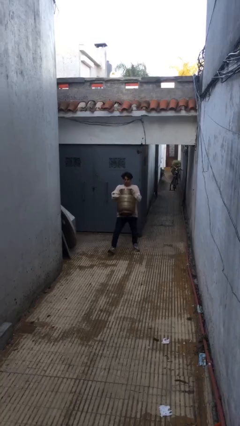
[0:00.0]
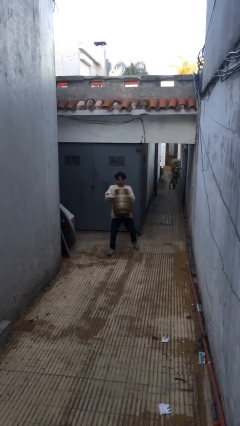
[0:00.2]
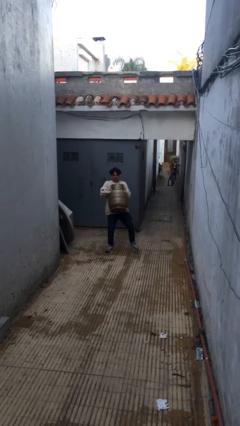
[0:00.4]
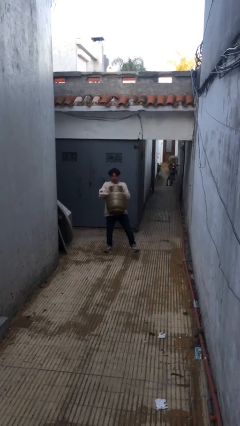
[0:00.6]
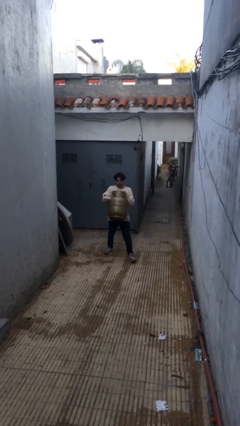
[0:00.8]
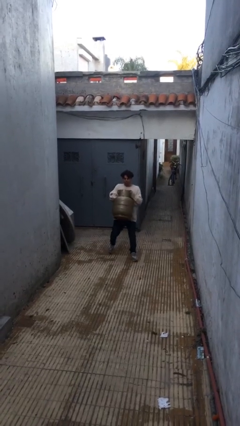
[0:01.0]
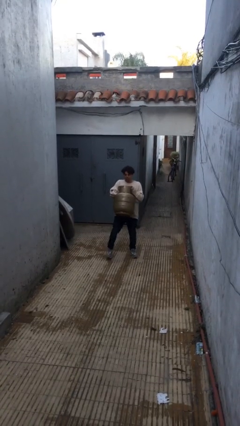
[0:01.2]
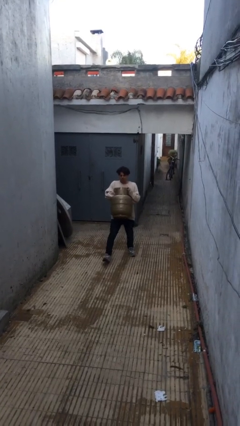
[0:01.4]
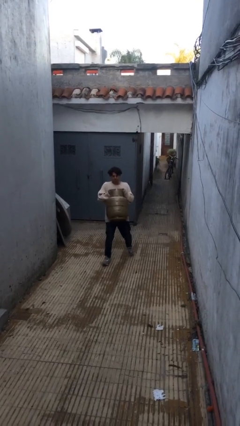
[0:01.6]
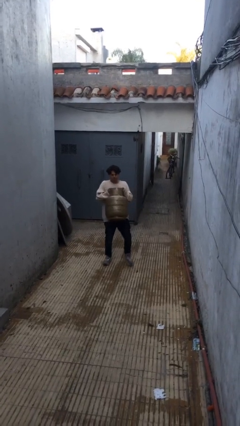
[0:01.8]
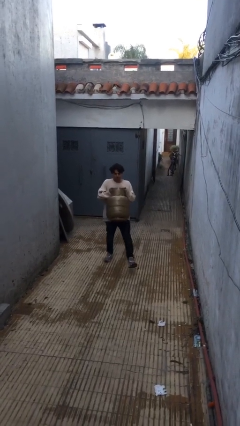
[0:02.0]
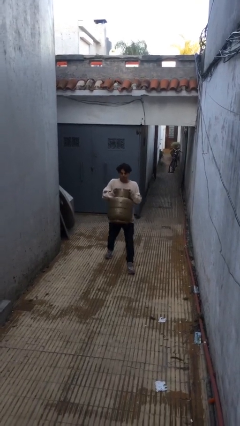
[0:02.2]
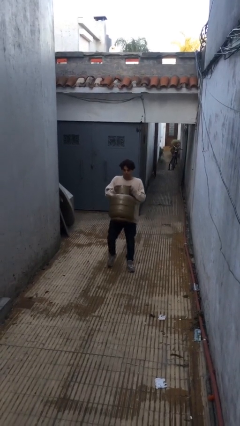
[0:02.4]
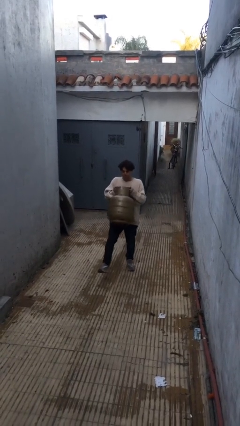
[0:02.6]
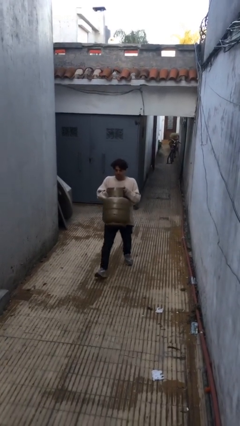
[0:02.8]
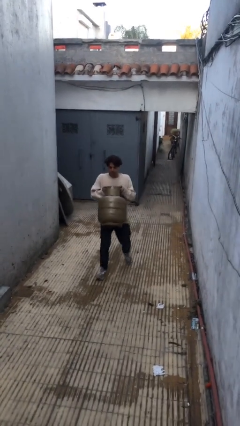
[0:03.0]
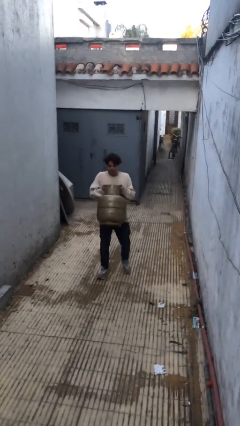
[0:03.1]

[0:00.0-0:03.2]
person carries heavy object

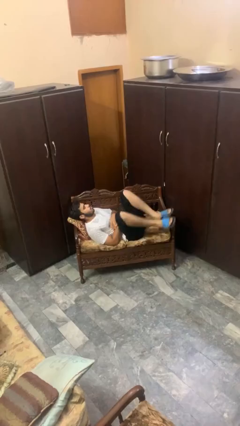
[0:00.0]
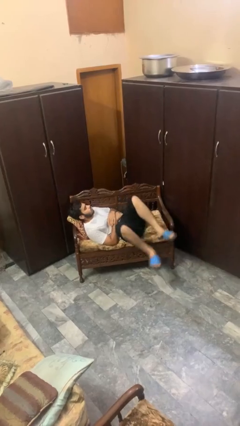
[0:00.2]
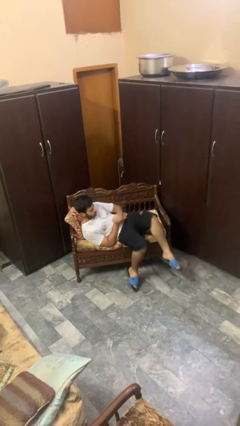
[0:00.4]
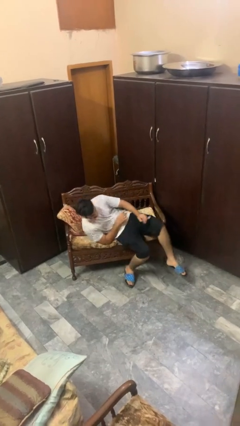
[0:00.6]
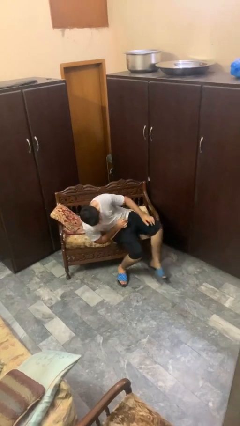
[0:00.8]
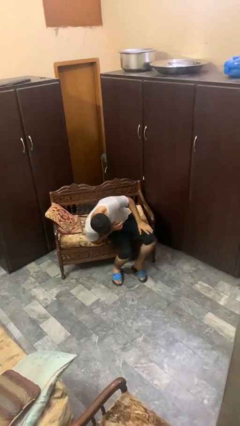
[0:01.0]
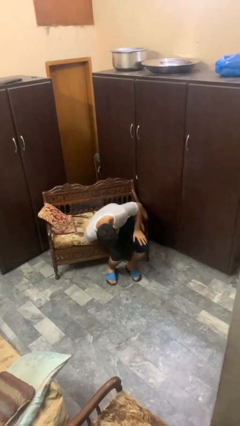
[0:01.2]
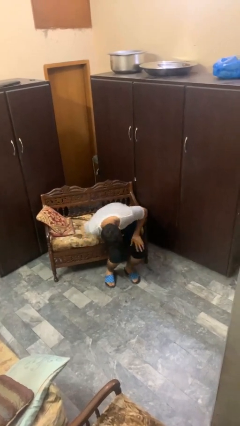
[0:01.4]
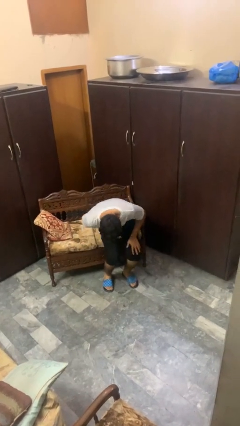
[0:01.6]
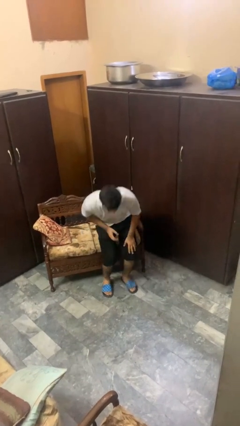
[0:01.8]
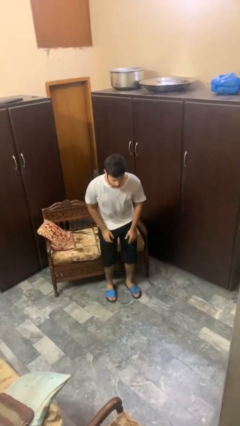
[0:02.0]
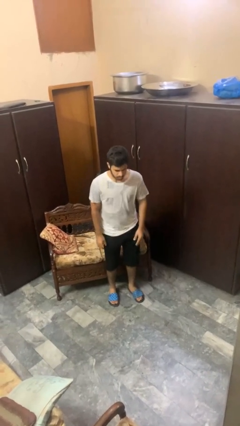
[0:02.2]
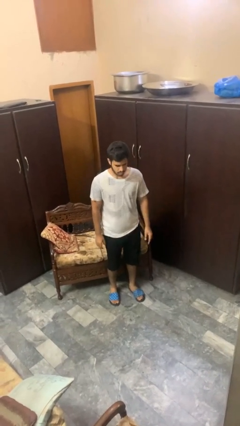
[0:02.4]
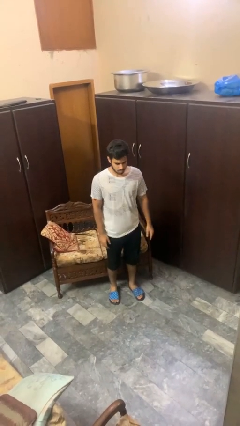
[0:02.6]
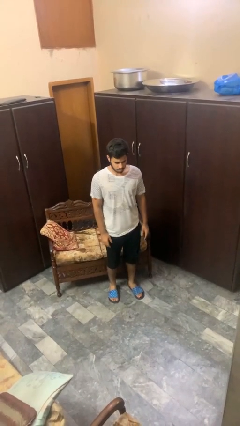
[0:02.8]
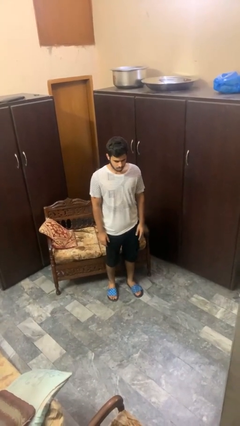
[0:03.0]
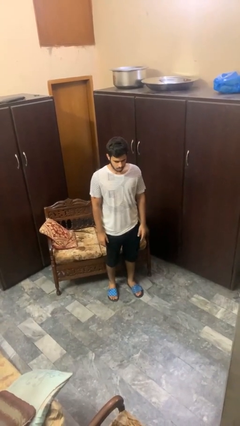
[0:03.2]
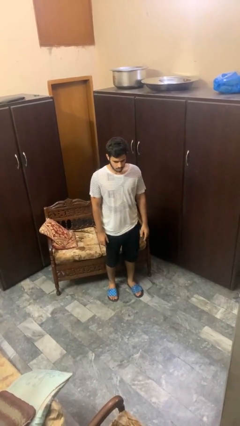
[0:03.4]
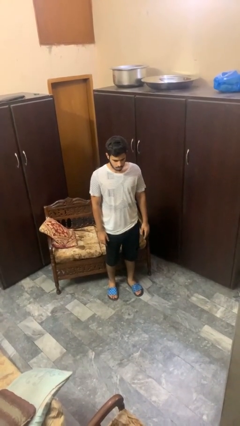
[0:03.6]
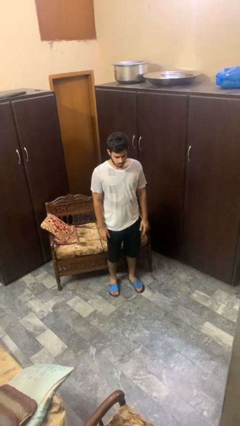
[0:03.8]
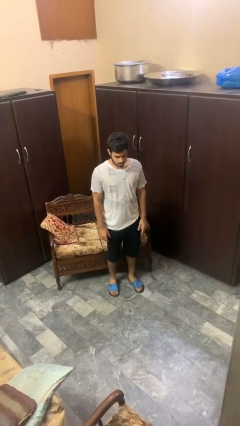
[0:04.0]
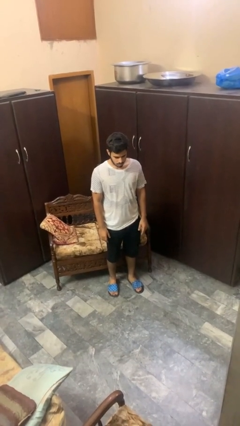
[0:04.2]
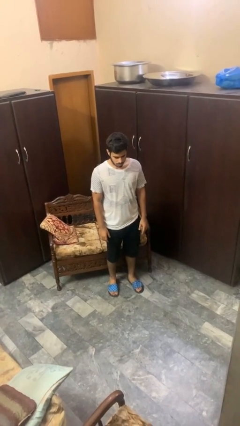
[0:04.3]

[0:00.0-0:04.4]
person stands up

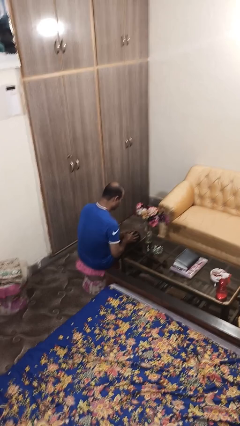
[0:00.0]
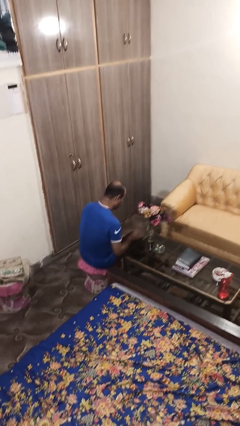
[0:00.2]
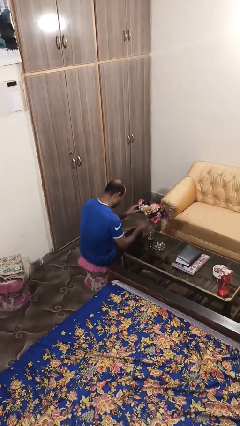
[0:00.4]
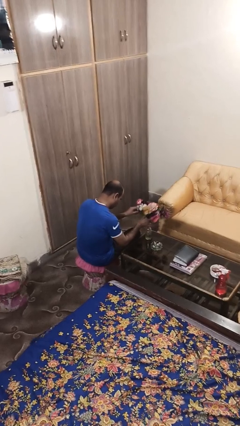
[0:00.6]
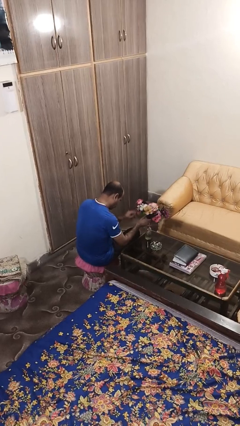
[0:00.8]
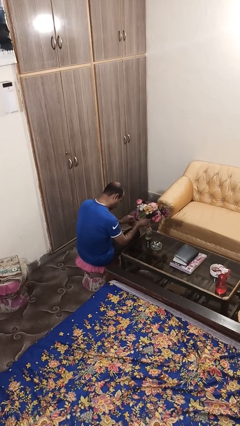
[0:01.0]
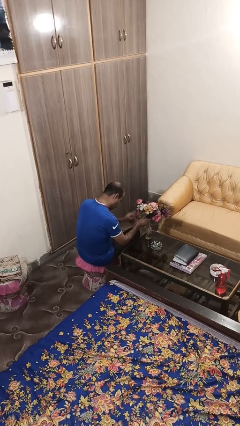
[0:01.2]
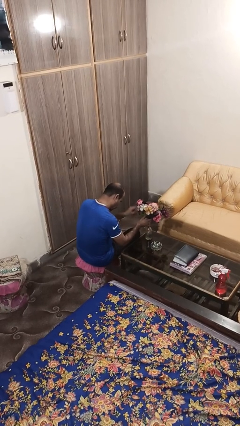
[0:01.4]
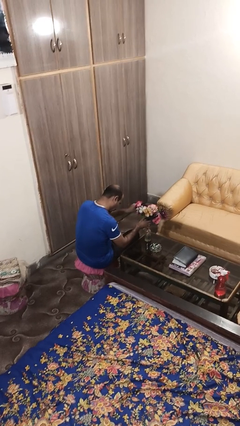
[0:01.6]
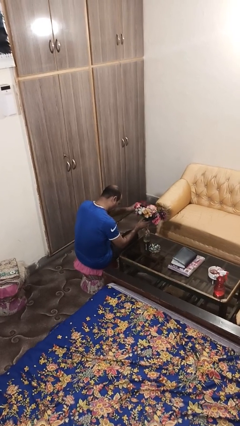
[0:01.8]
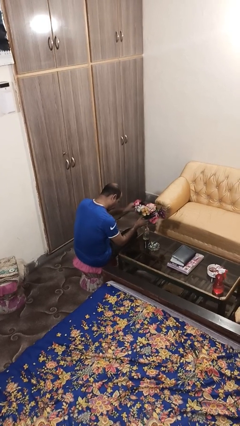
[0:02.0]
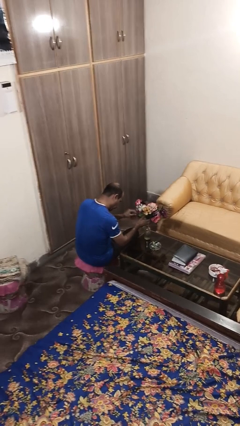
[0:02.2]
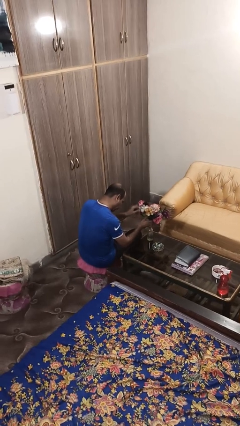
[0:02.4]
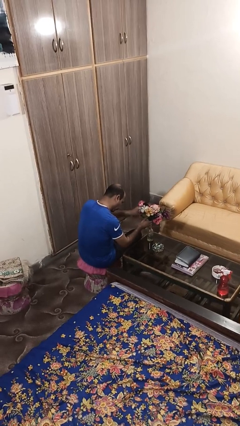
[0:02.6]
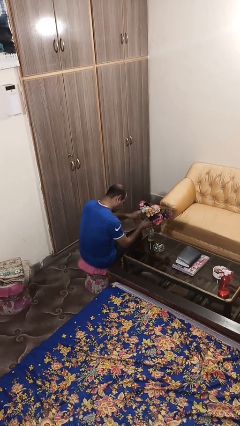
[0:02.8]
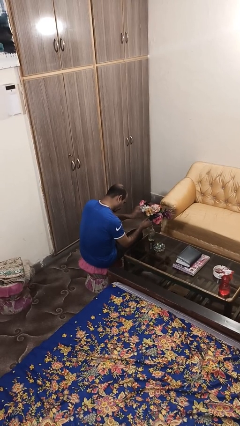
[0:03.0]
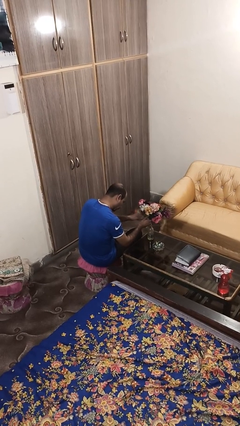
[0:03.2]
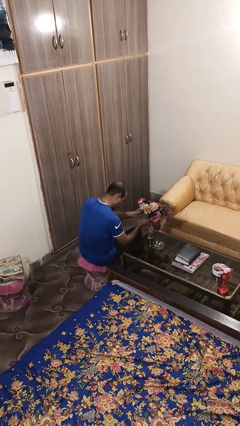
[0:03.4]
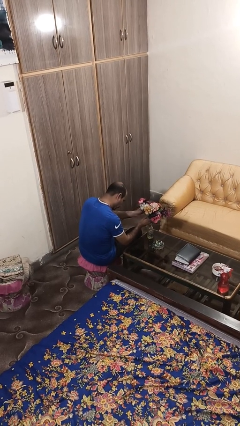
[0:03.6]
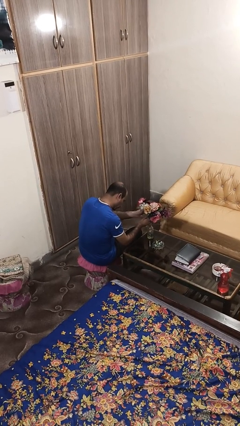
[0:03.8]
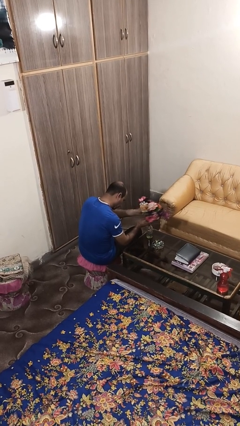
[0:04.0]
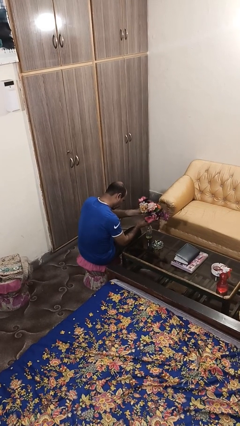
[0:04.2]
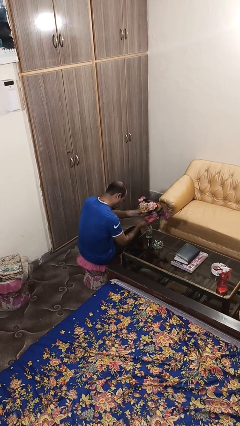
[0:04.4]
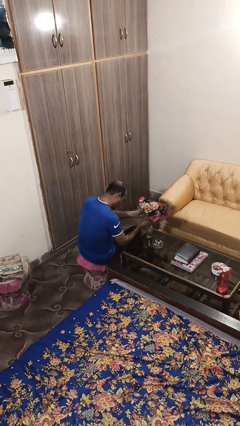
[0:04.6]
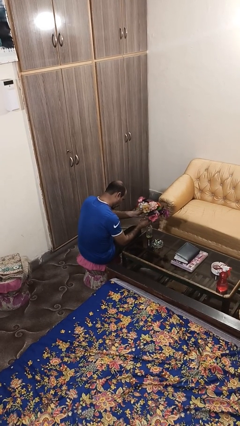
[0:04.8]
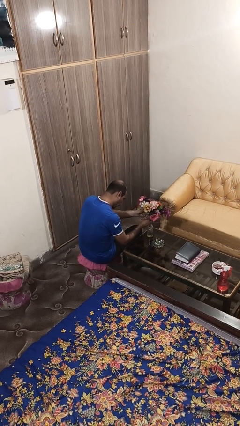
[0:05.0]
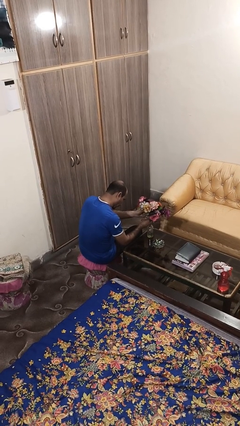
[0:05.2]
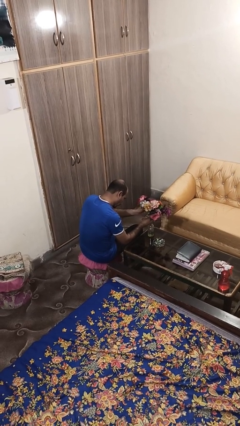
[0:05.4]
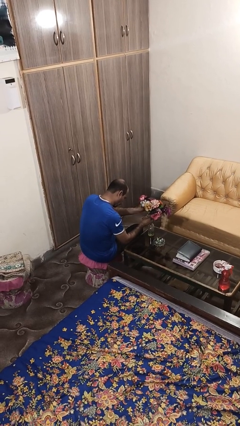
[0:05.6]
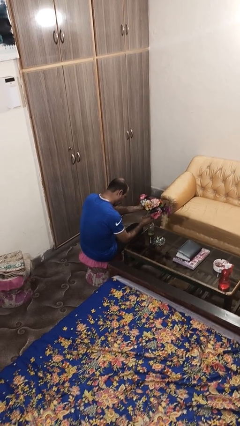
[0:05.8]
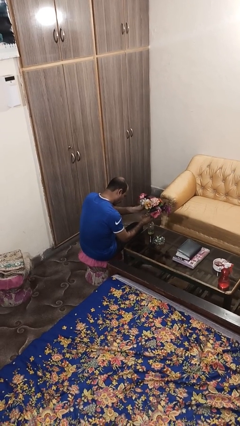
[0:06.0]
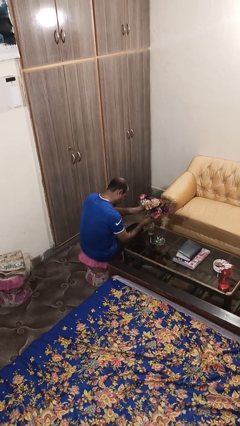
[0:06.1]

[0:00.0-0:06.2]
person arranges flowers in vase

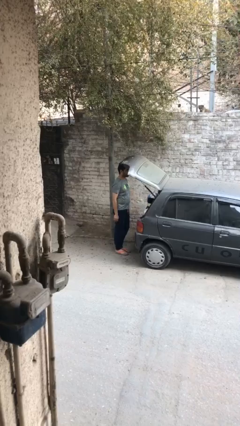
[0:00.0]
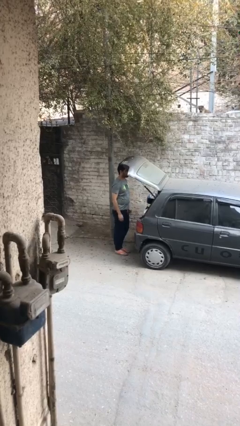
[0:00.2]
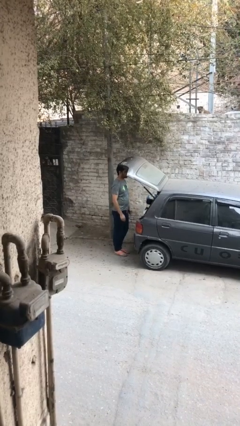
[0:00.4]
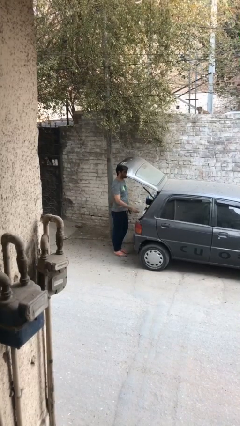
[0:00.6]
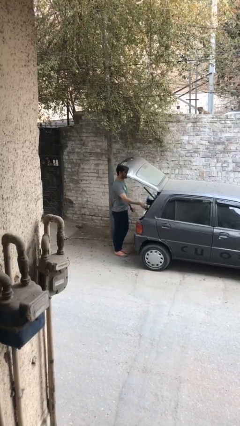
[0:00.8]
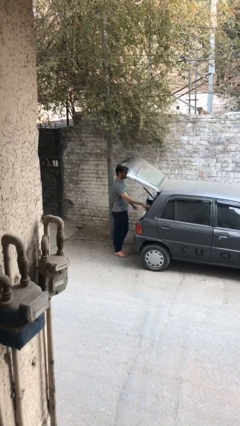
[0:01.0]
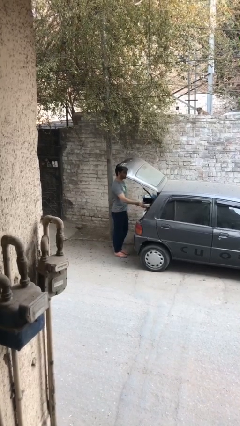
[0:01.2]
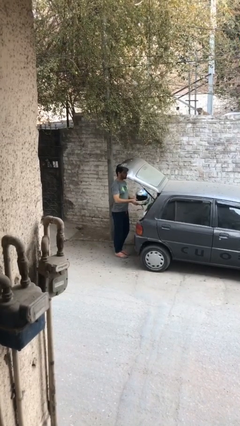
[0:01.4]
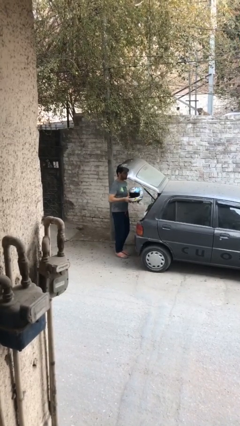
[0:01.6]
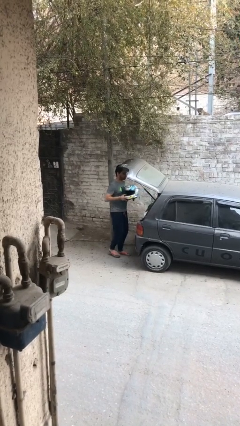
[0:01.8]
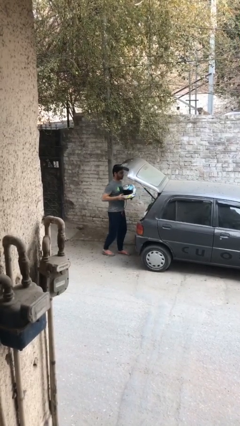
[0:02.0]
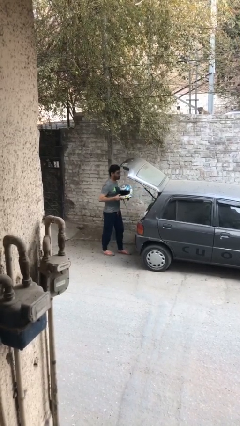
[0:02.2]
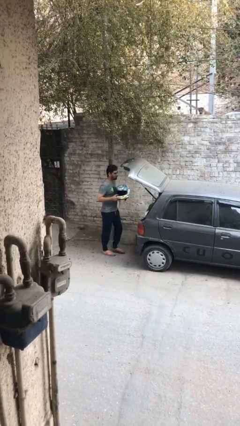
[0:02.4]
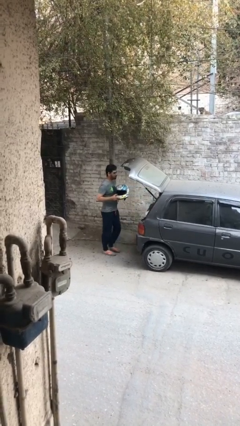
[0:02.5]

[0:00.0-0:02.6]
person unloads car

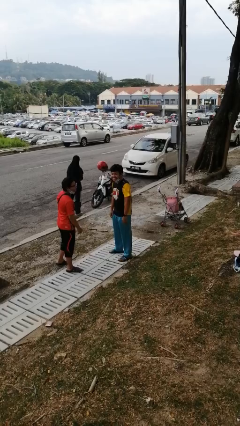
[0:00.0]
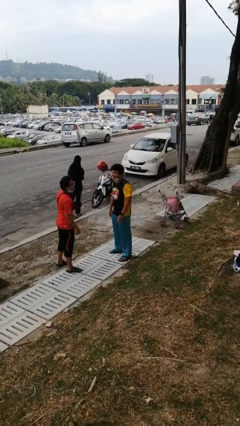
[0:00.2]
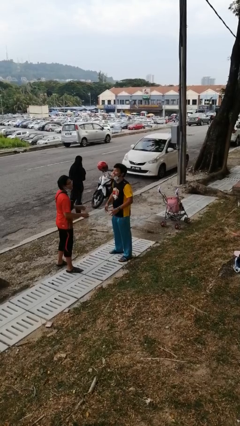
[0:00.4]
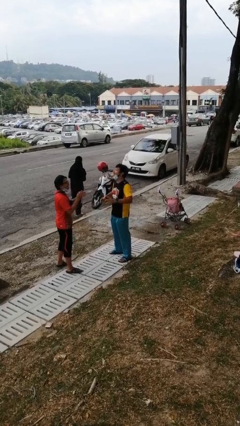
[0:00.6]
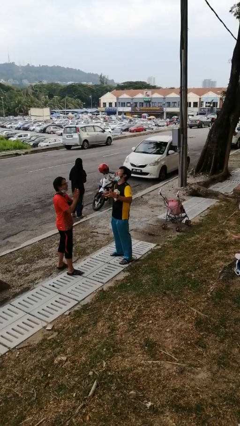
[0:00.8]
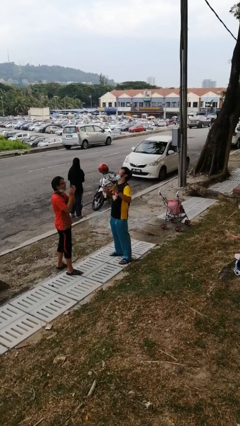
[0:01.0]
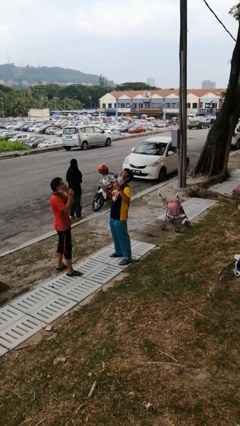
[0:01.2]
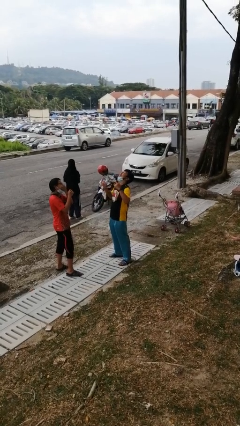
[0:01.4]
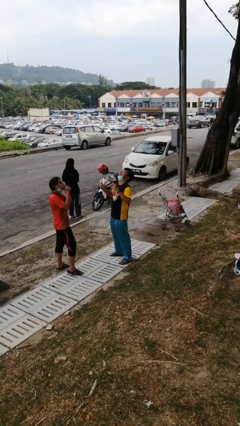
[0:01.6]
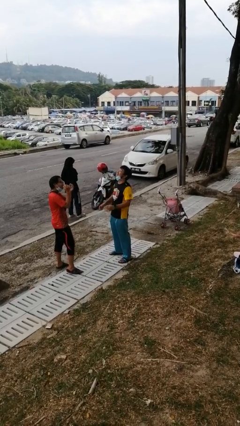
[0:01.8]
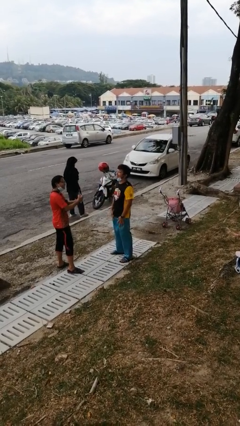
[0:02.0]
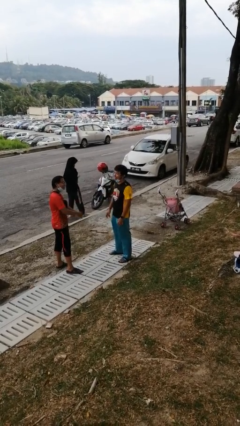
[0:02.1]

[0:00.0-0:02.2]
person laughs with person
